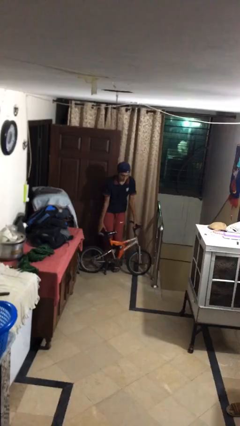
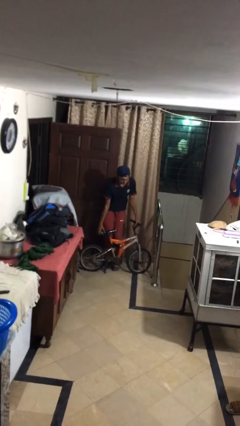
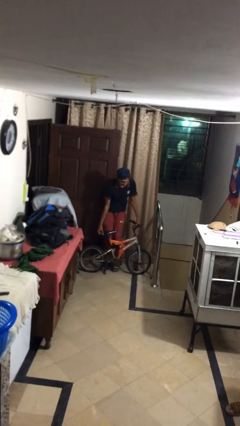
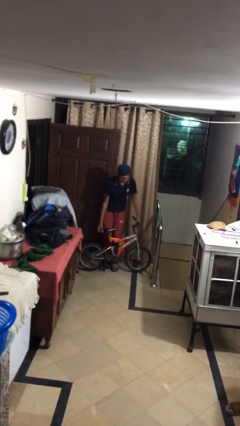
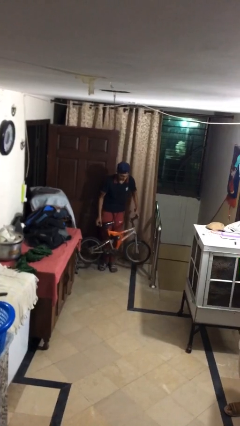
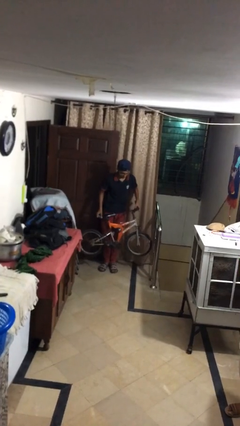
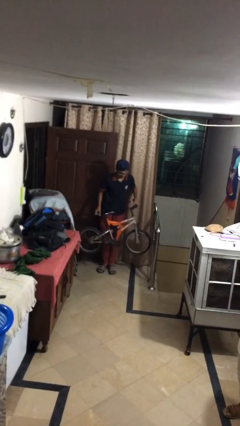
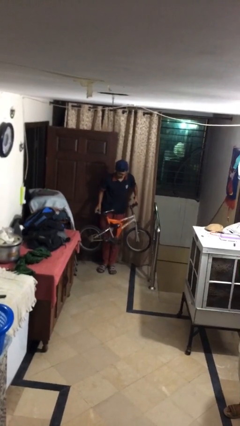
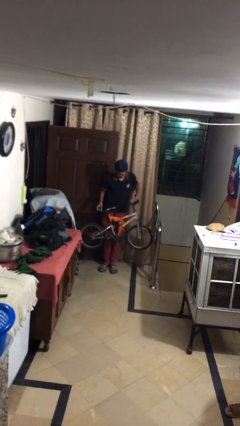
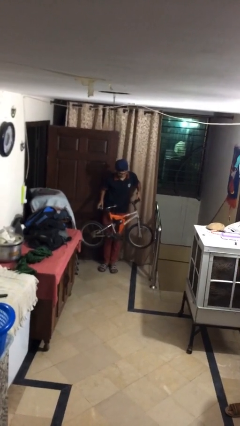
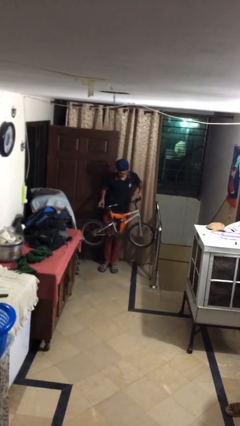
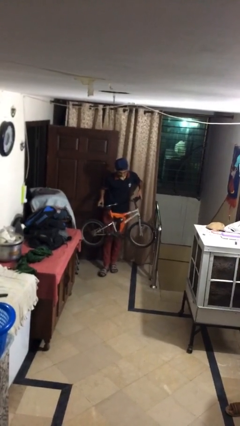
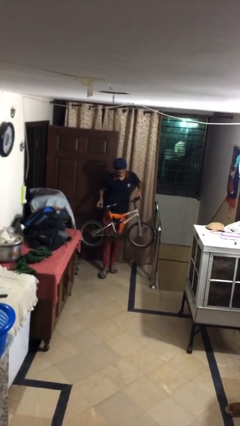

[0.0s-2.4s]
person picks up object from floor

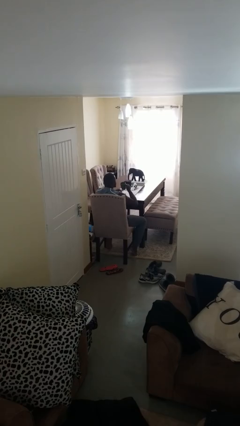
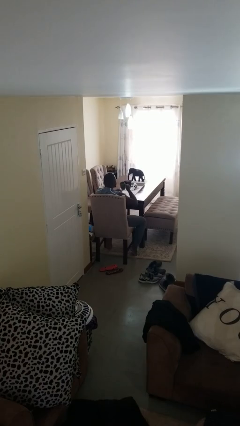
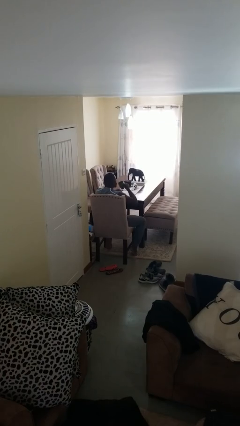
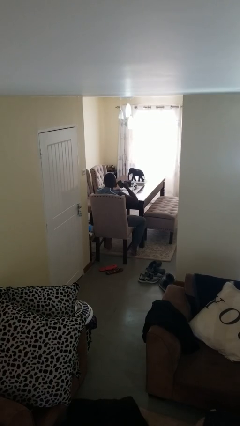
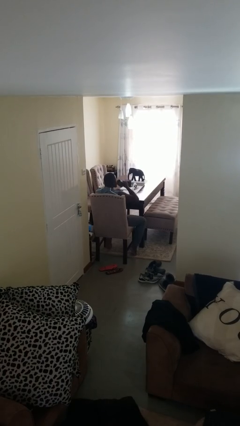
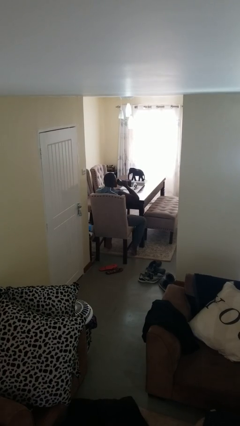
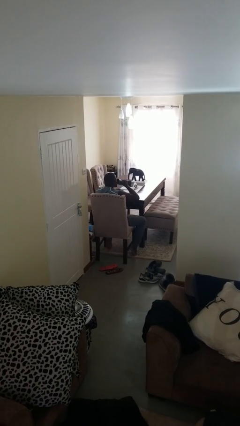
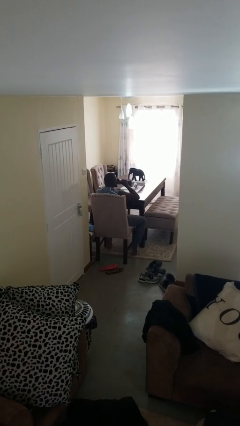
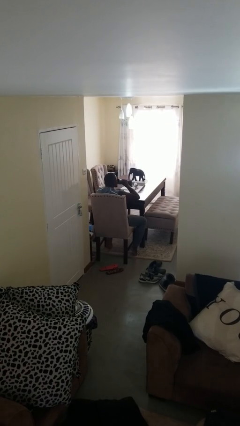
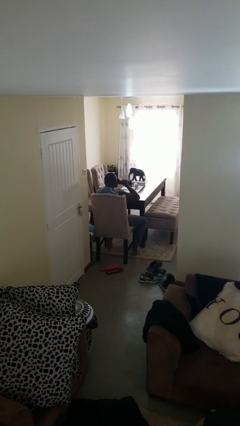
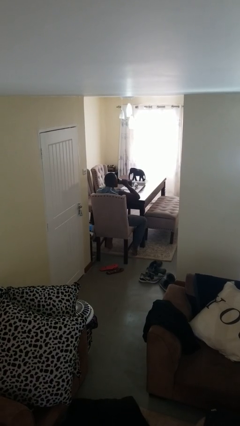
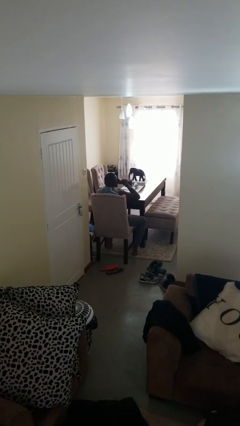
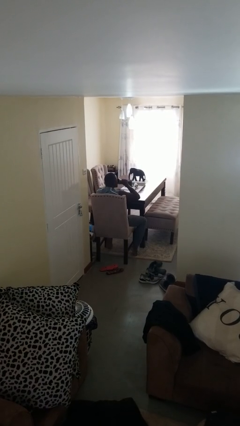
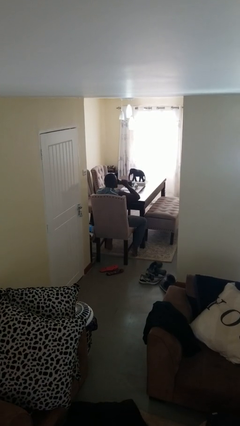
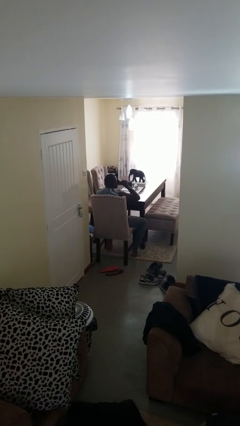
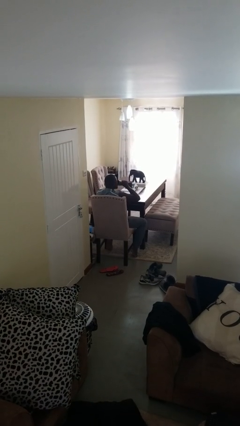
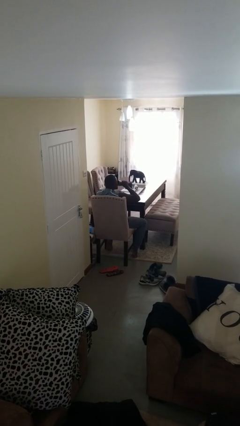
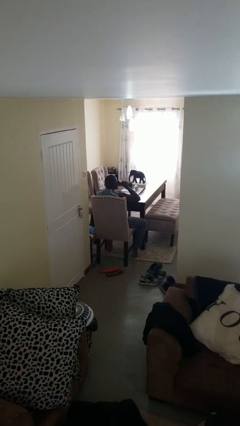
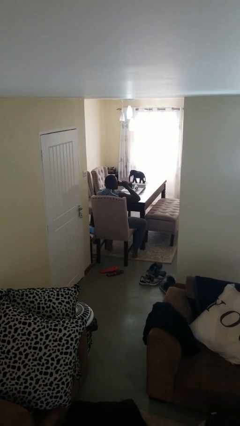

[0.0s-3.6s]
person drinks from mug

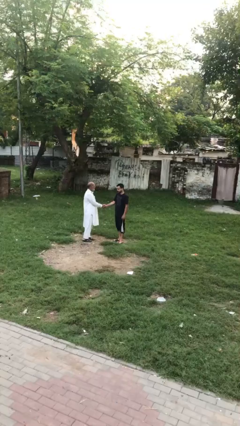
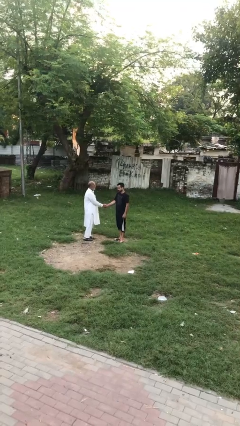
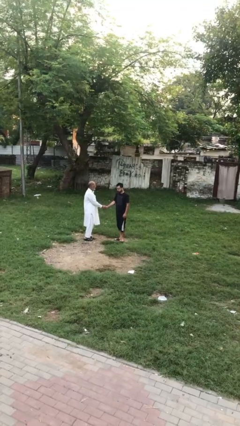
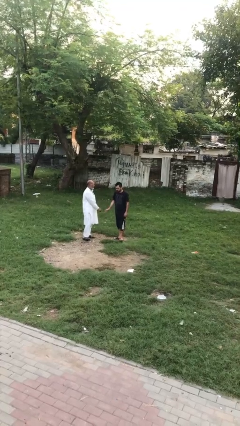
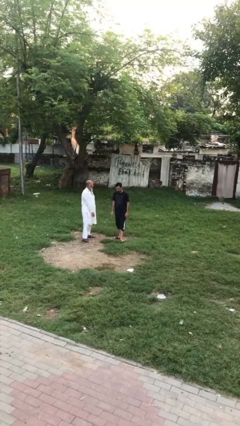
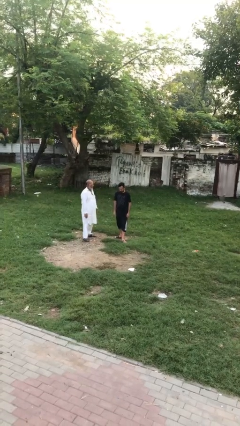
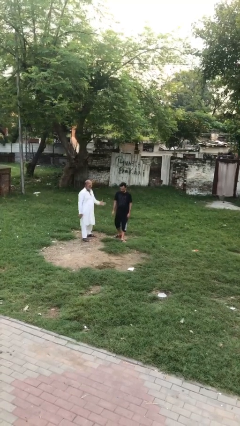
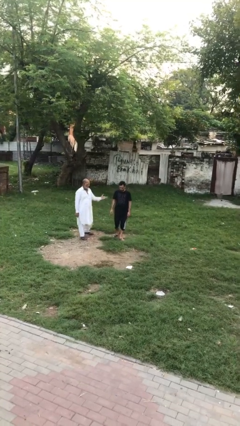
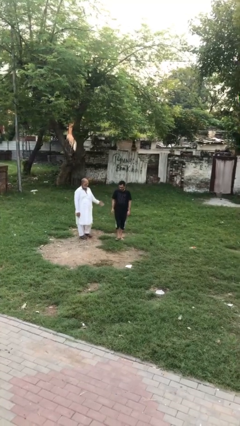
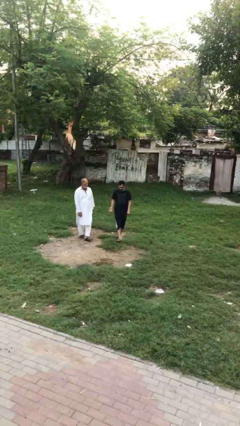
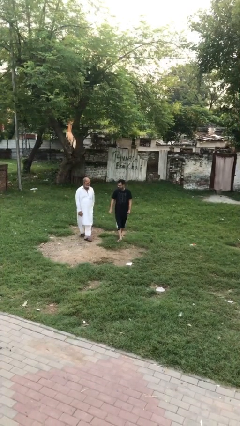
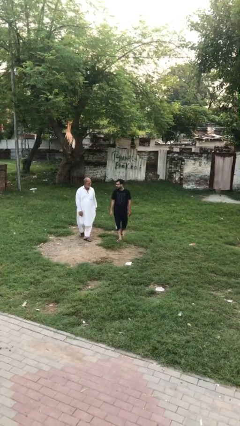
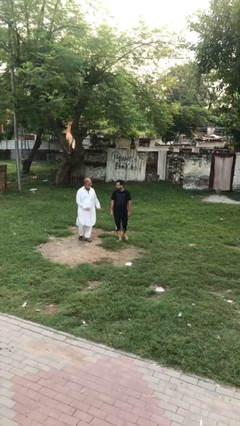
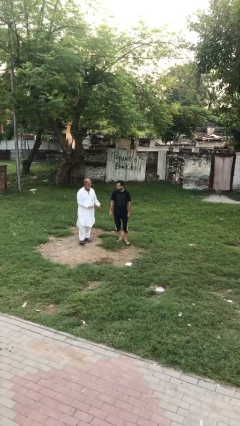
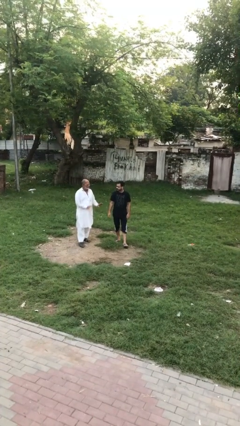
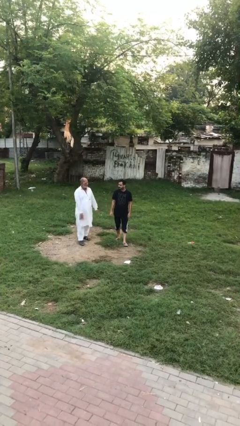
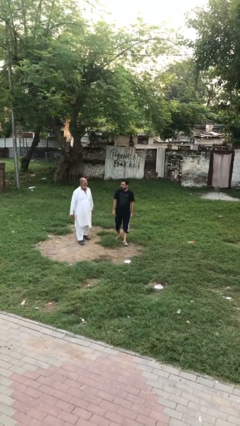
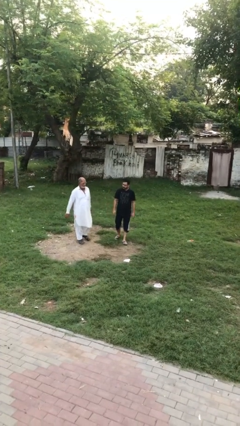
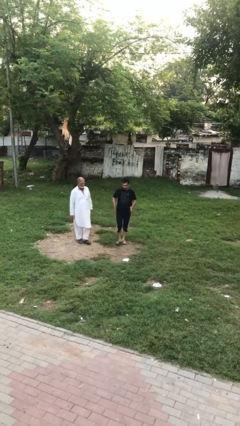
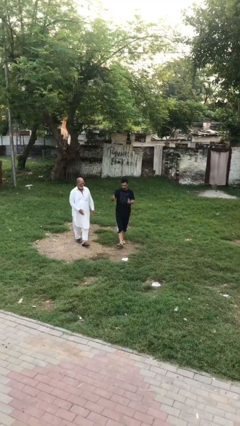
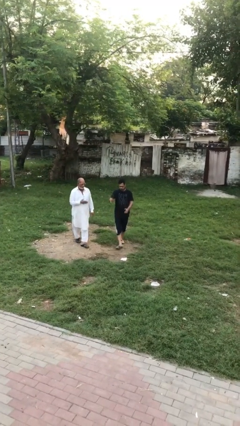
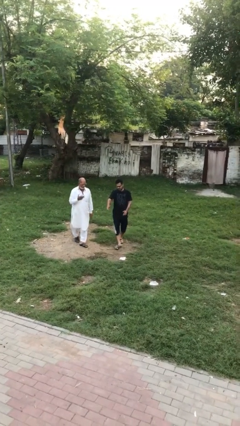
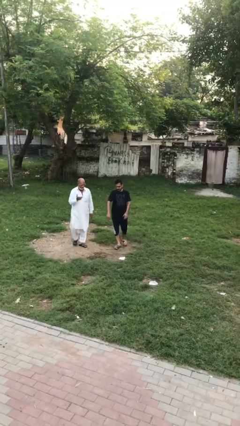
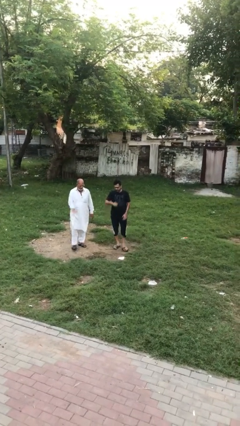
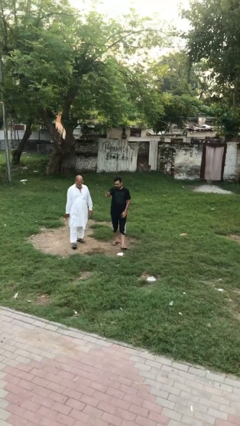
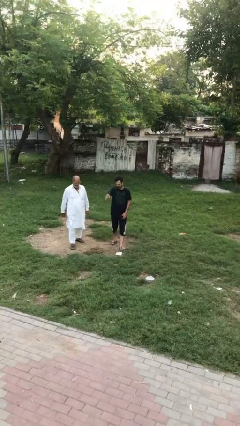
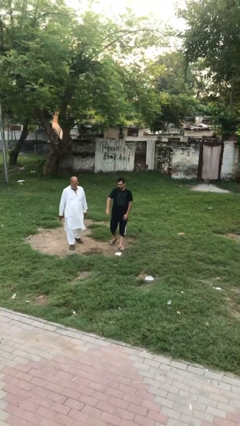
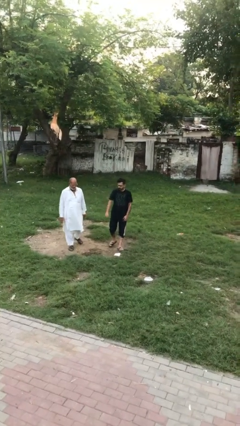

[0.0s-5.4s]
person talks to person

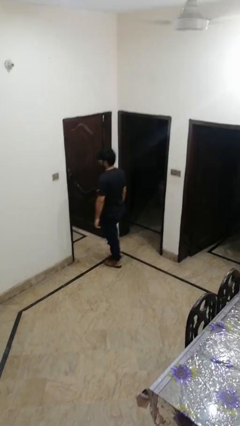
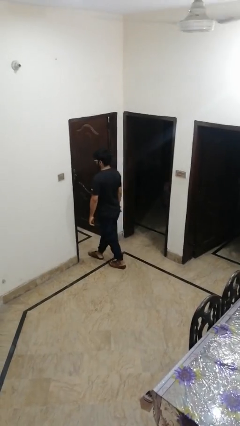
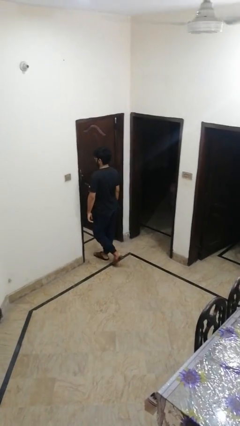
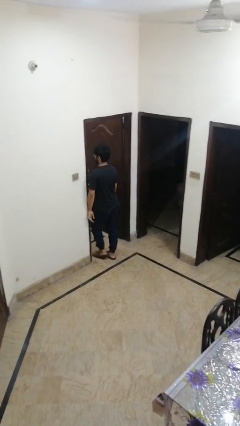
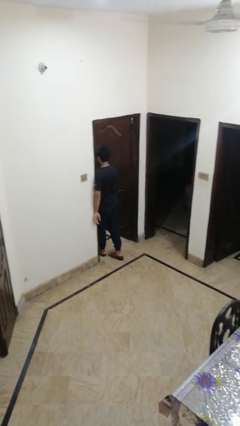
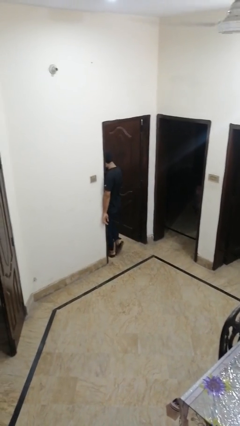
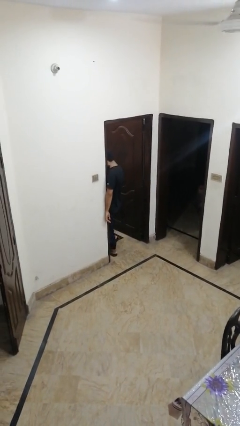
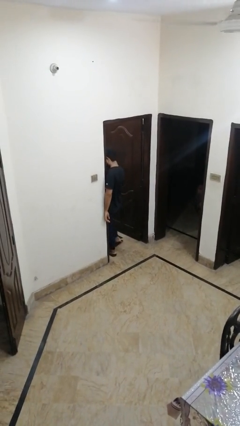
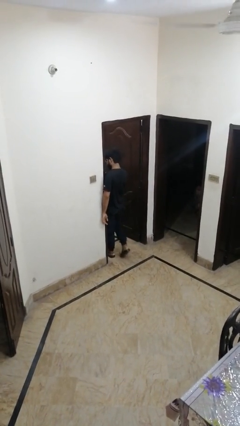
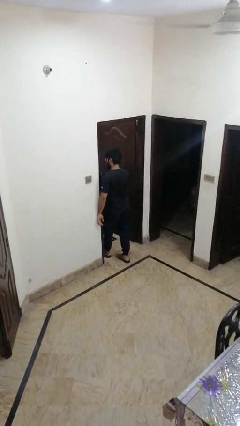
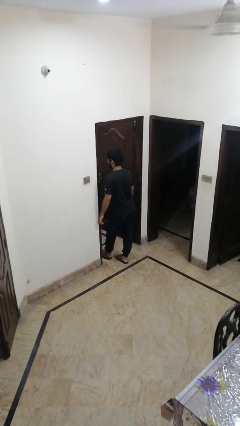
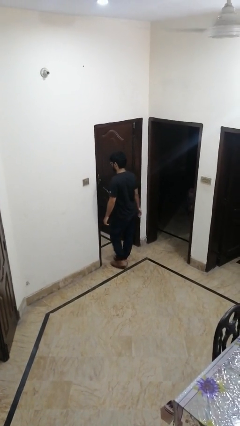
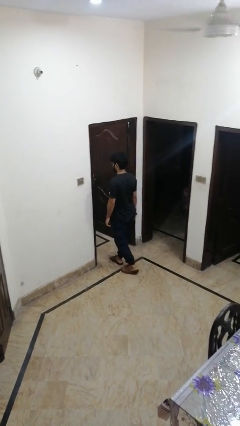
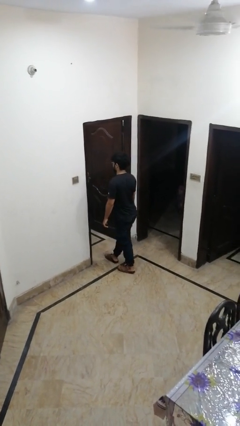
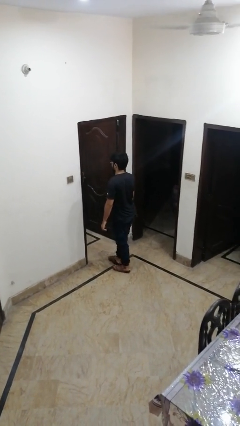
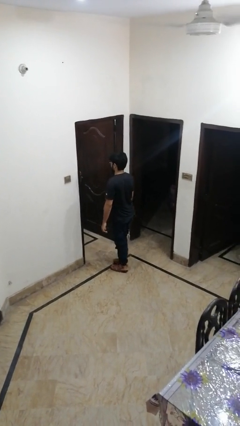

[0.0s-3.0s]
person bumps into wall

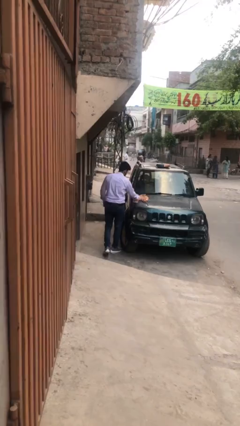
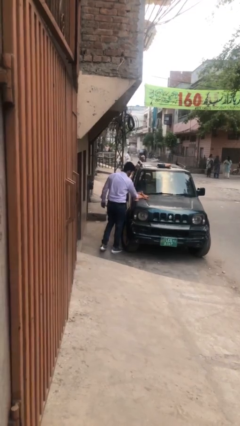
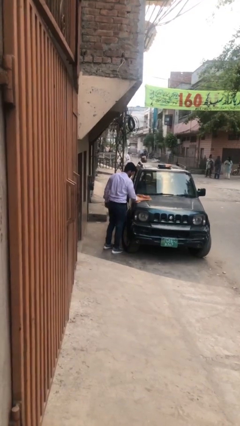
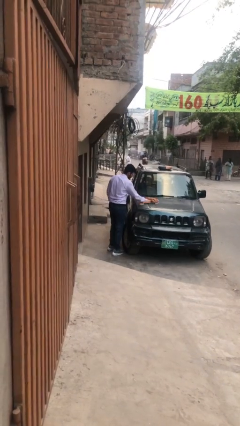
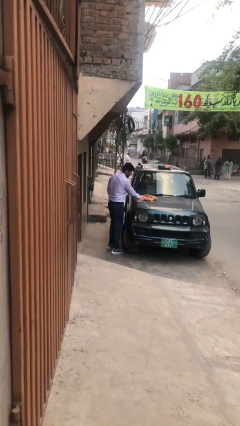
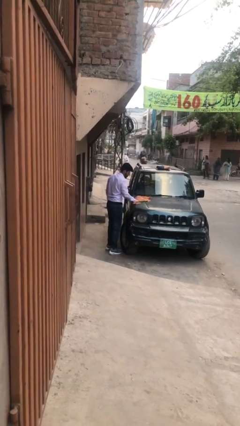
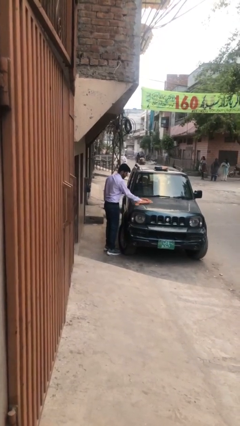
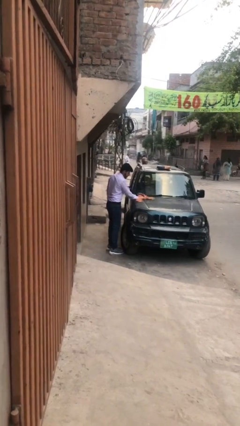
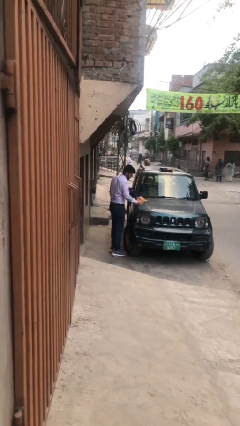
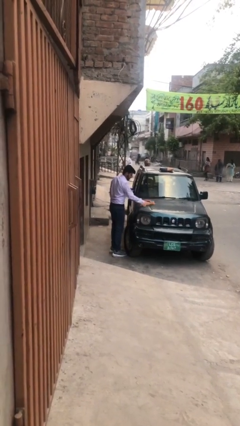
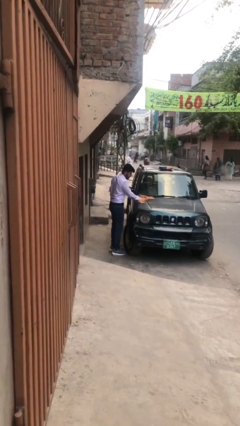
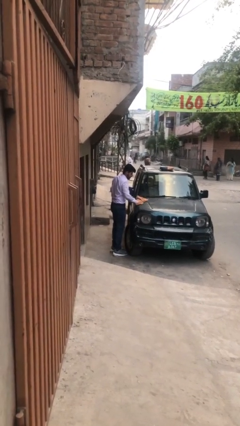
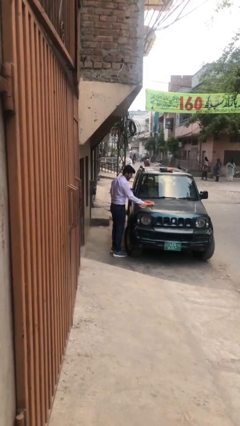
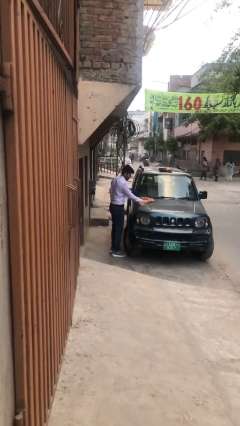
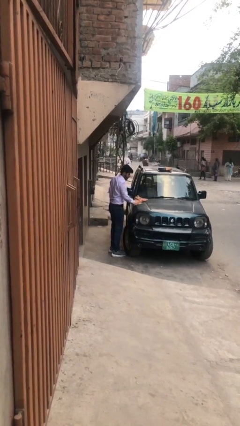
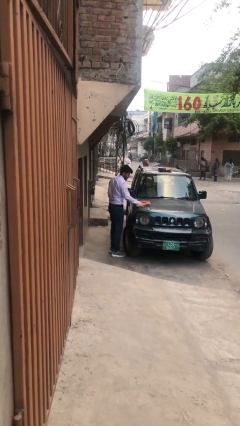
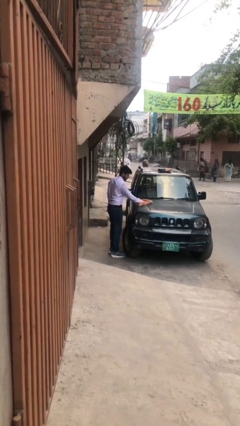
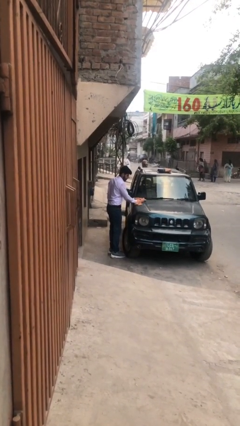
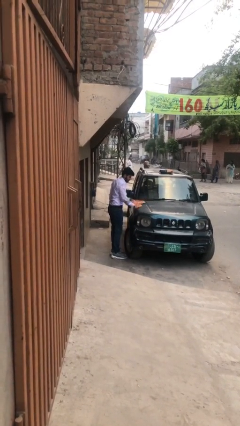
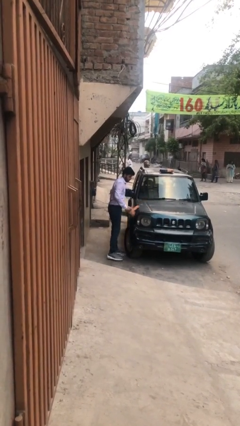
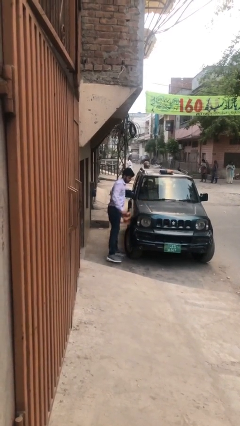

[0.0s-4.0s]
person polishes car with rag
